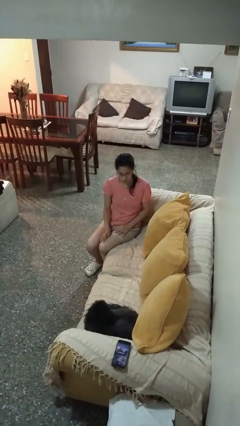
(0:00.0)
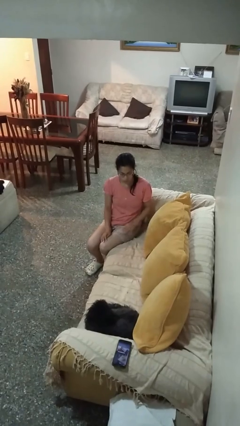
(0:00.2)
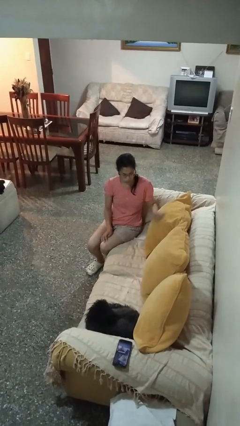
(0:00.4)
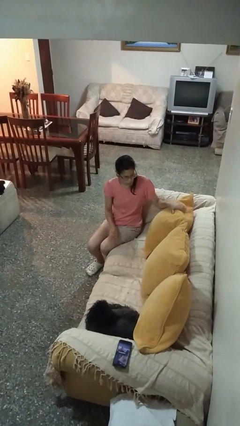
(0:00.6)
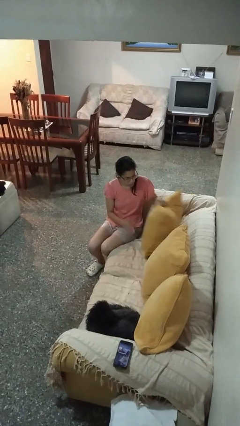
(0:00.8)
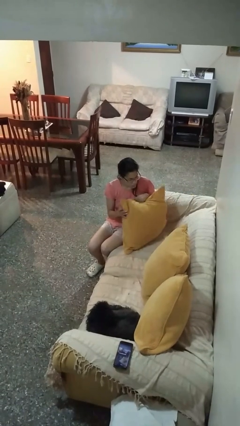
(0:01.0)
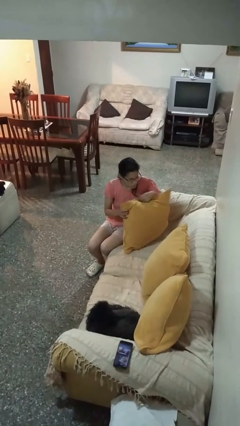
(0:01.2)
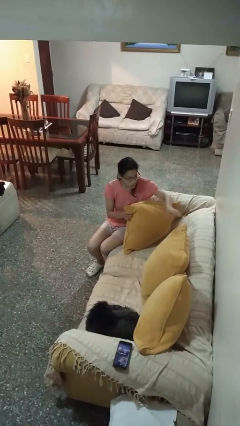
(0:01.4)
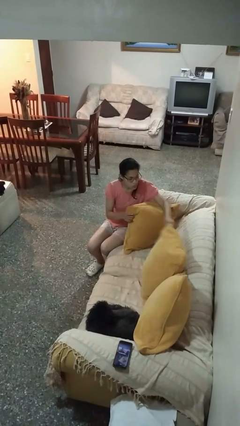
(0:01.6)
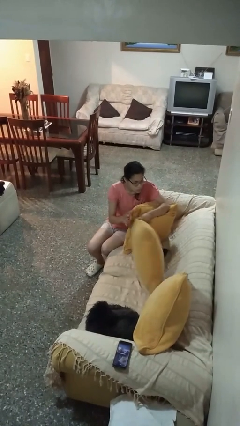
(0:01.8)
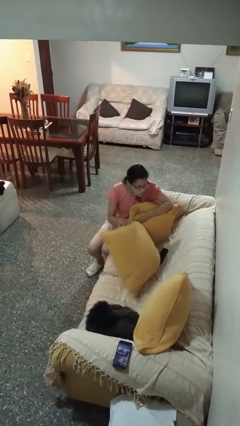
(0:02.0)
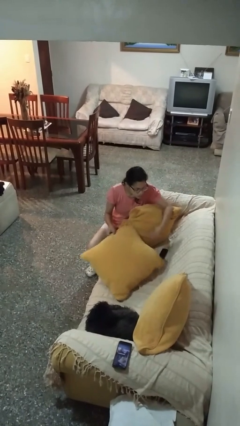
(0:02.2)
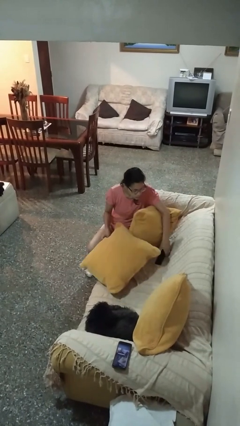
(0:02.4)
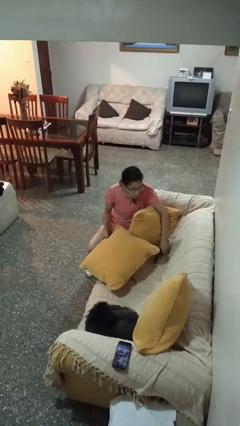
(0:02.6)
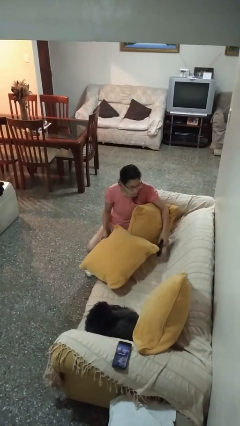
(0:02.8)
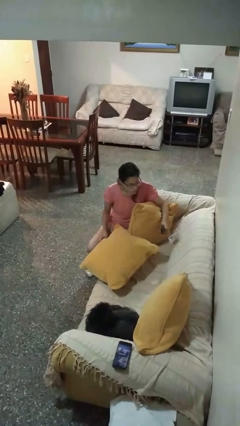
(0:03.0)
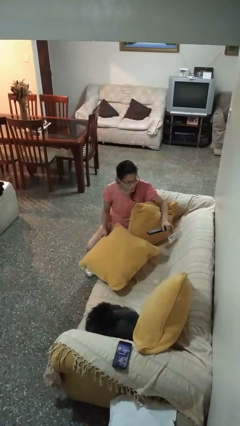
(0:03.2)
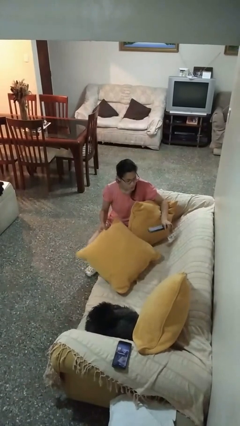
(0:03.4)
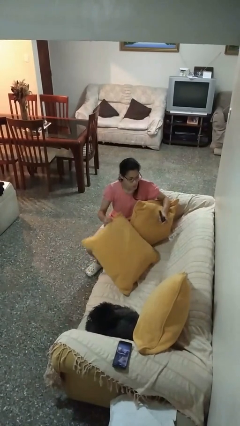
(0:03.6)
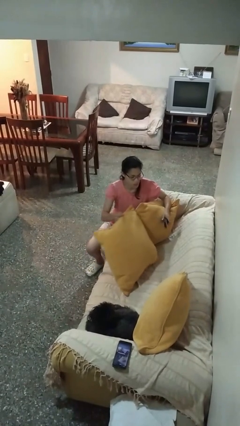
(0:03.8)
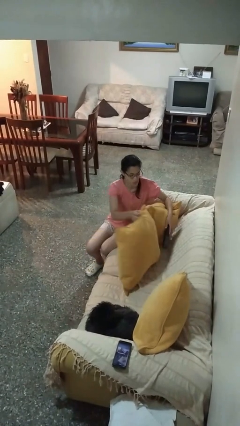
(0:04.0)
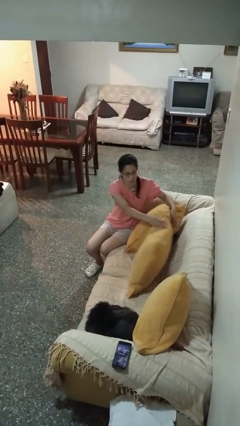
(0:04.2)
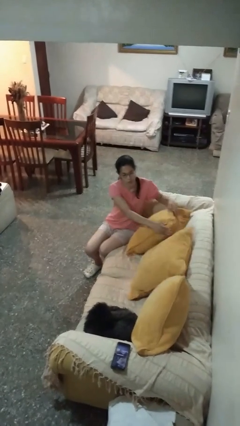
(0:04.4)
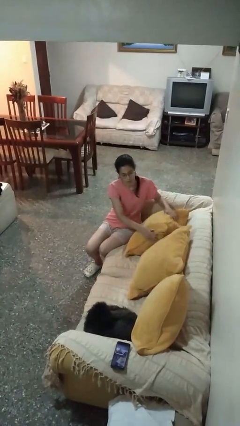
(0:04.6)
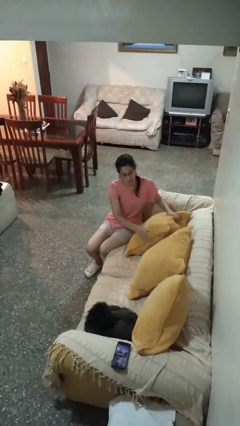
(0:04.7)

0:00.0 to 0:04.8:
person searches in couch

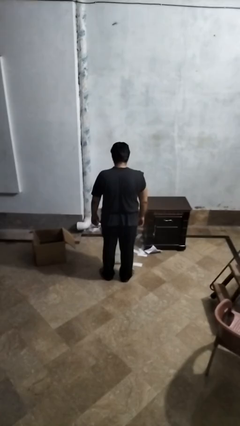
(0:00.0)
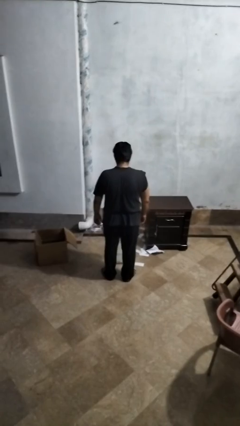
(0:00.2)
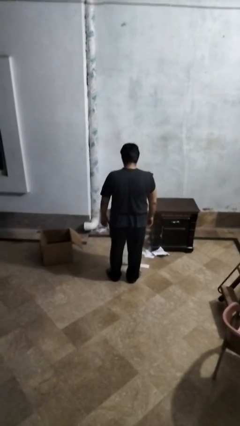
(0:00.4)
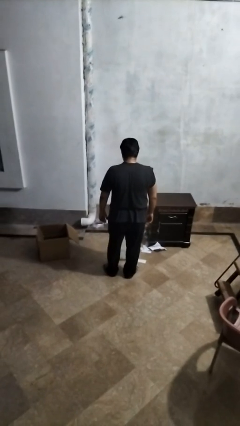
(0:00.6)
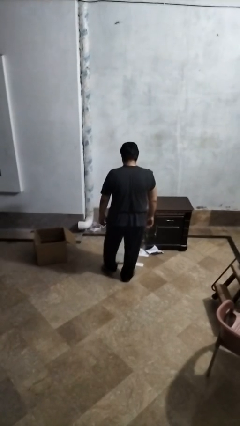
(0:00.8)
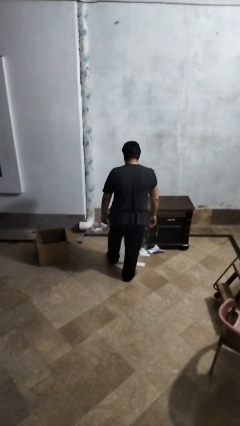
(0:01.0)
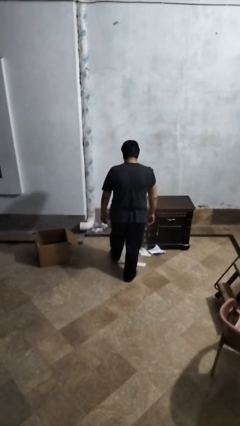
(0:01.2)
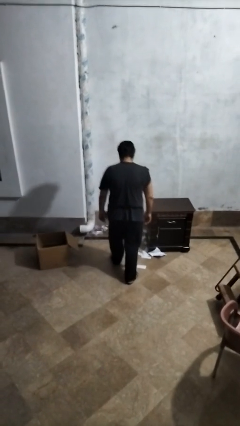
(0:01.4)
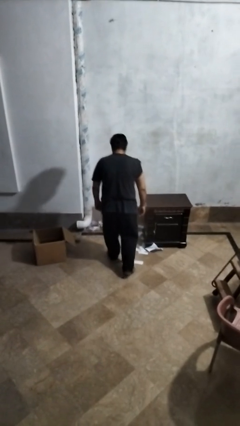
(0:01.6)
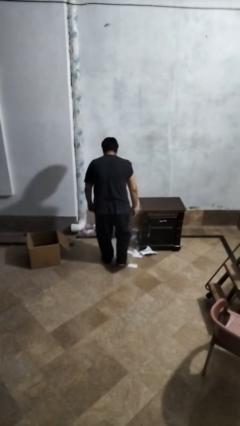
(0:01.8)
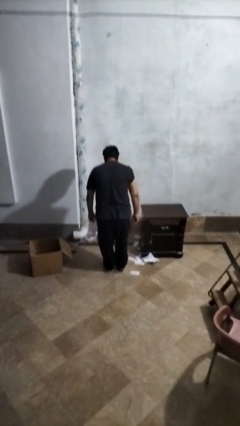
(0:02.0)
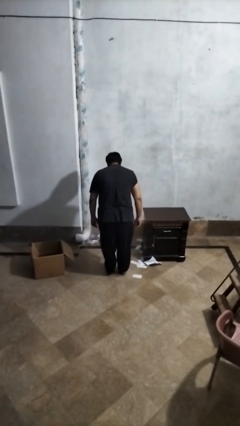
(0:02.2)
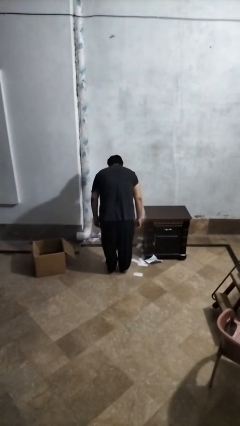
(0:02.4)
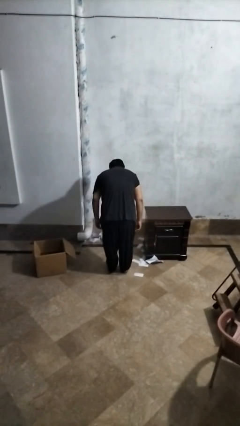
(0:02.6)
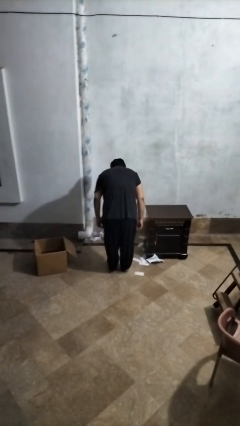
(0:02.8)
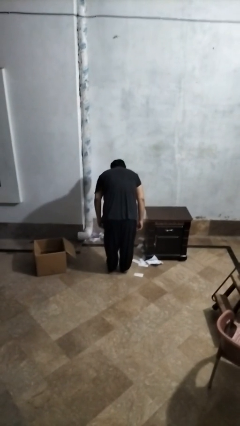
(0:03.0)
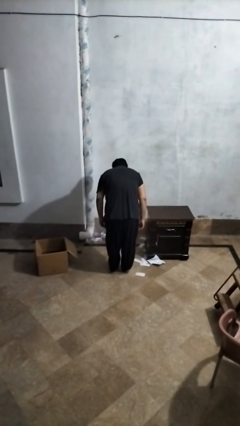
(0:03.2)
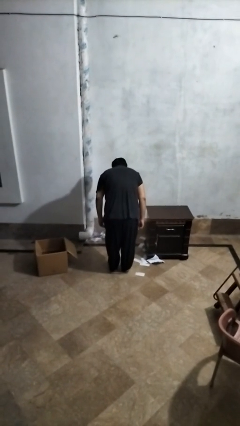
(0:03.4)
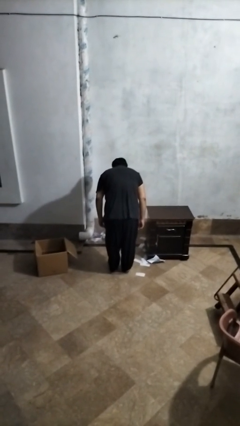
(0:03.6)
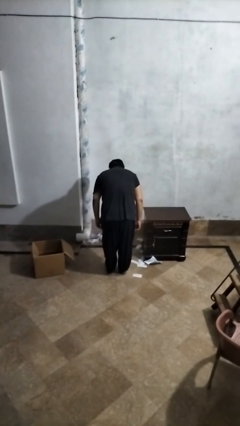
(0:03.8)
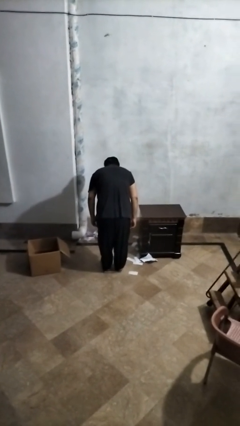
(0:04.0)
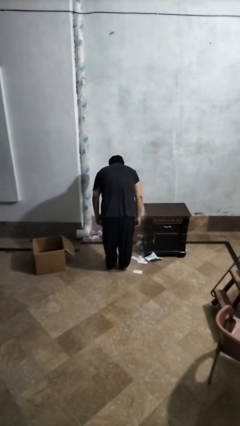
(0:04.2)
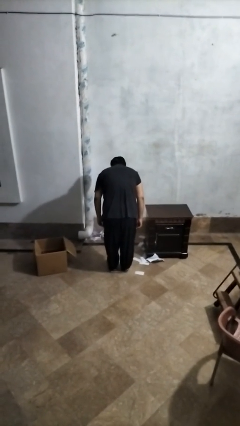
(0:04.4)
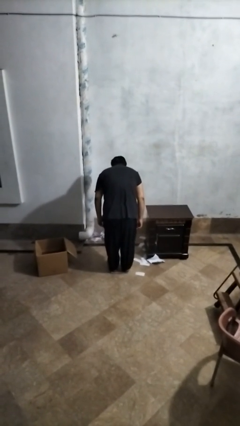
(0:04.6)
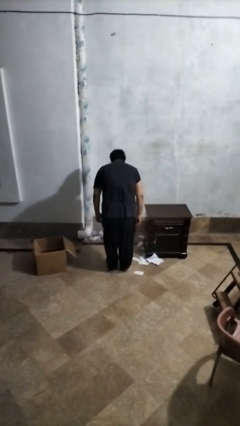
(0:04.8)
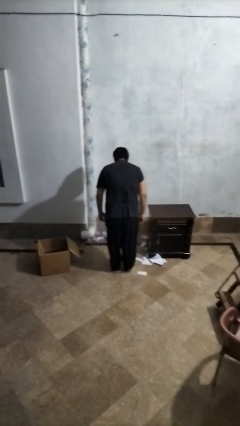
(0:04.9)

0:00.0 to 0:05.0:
person uses bodyweight scale

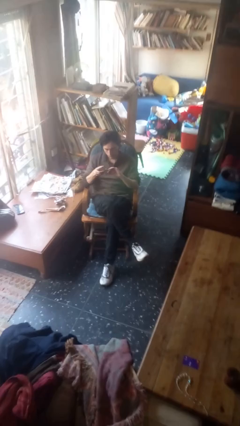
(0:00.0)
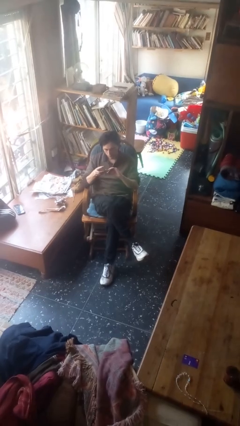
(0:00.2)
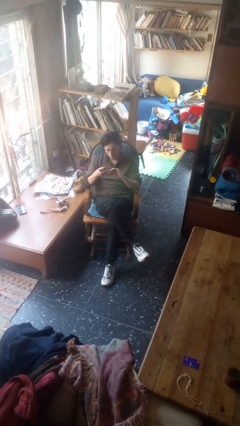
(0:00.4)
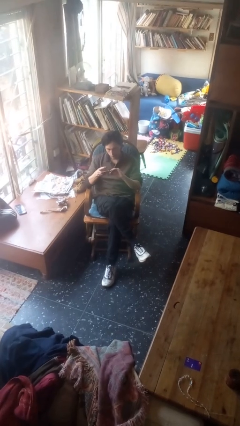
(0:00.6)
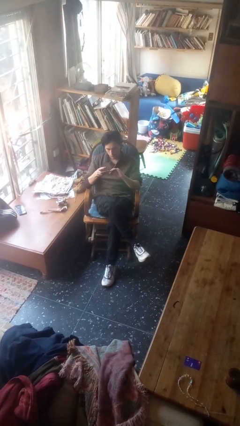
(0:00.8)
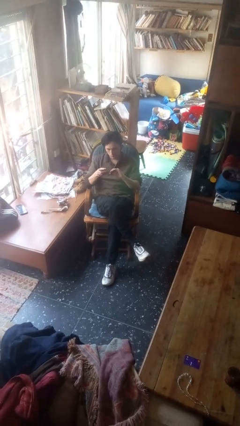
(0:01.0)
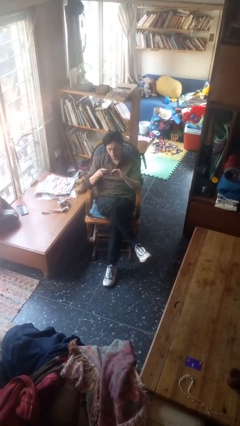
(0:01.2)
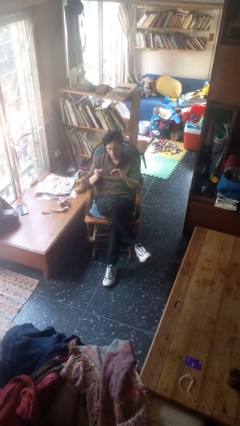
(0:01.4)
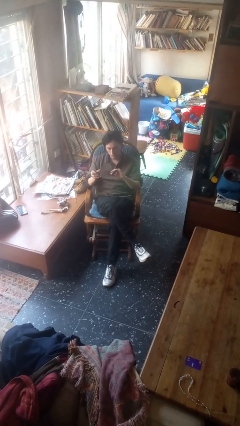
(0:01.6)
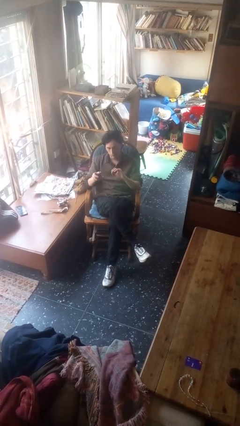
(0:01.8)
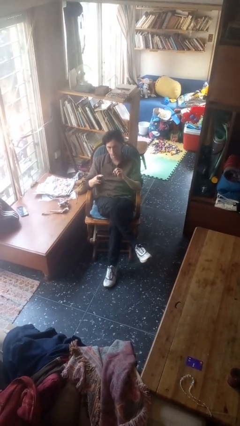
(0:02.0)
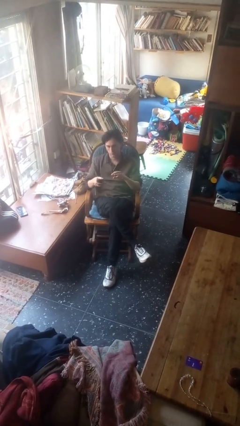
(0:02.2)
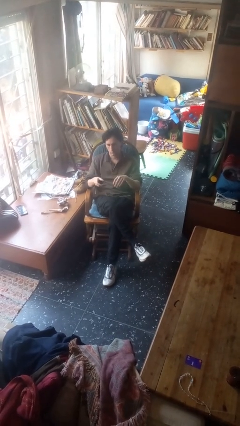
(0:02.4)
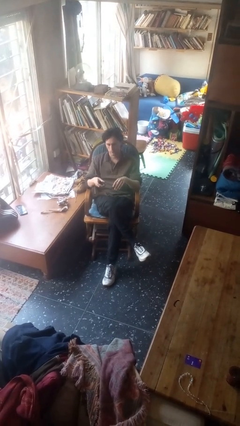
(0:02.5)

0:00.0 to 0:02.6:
person clips fingernails

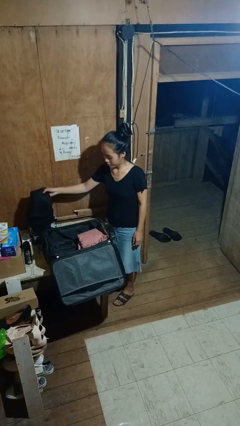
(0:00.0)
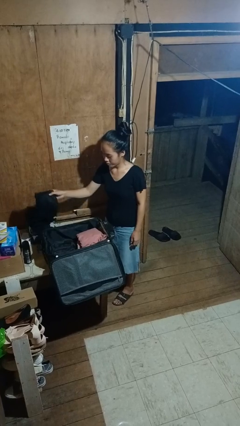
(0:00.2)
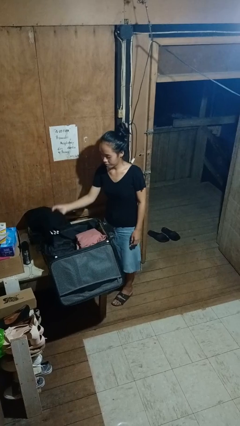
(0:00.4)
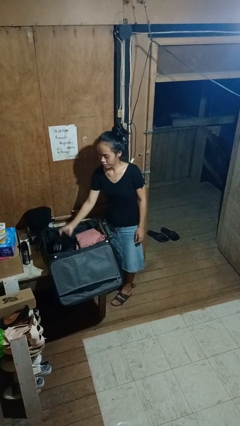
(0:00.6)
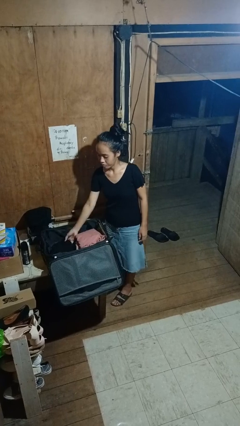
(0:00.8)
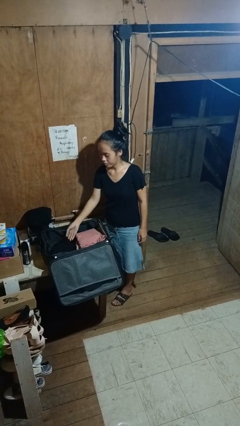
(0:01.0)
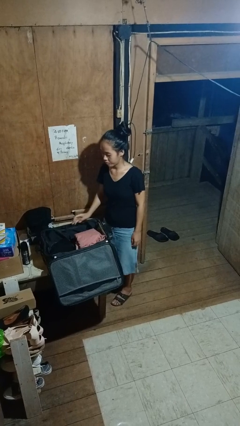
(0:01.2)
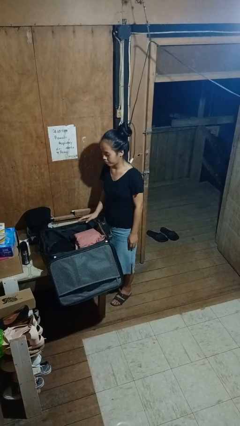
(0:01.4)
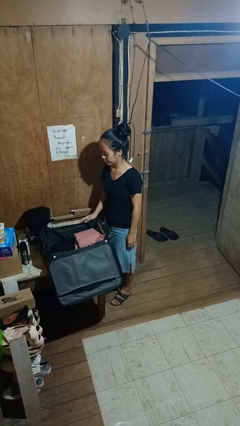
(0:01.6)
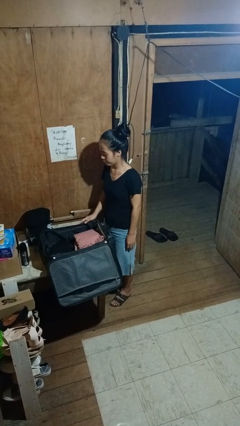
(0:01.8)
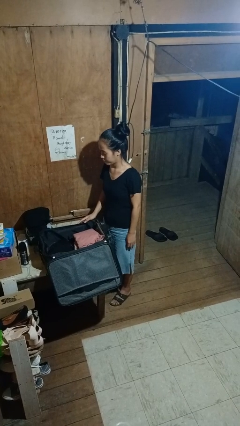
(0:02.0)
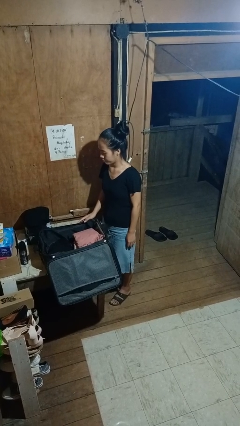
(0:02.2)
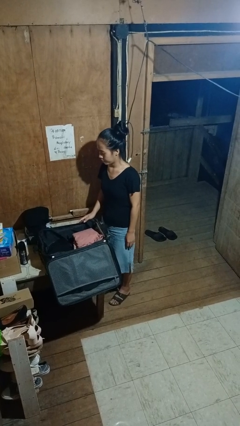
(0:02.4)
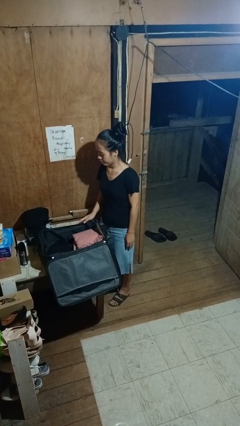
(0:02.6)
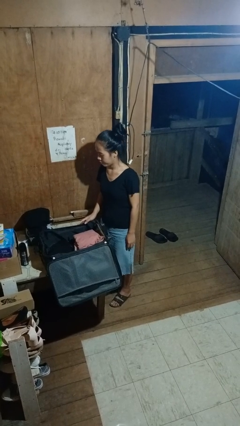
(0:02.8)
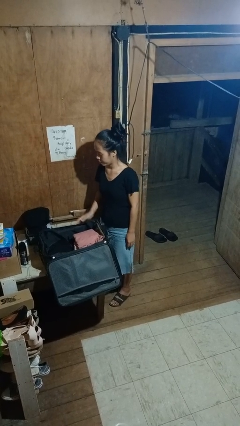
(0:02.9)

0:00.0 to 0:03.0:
person loads clothes into suitcase

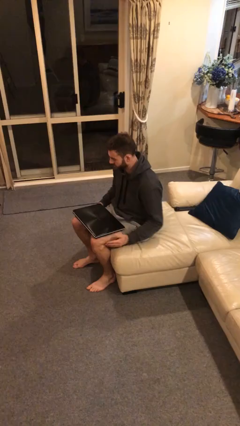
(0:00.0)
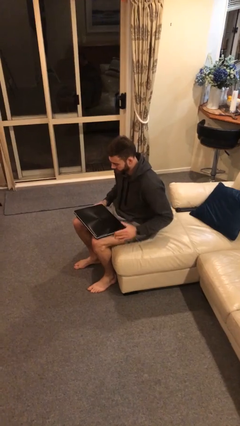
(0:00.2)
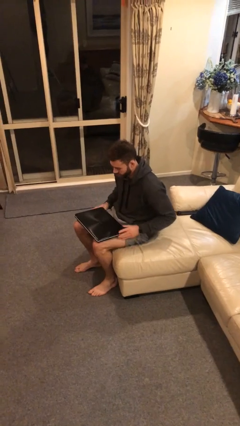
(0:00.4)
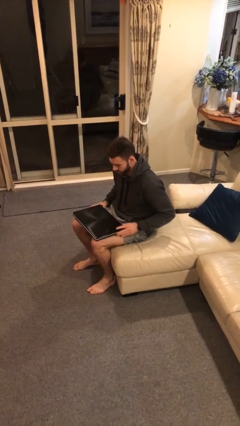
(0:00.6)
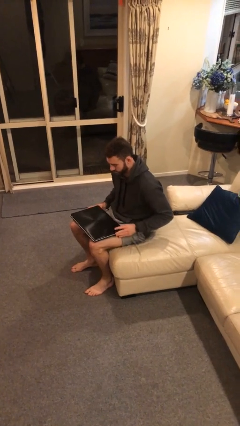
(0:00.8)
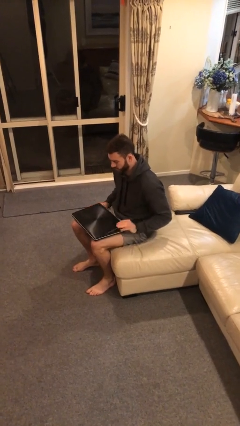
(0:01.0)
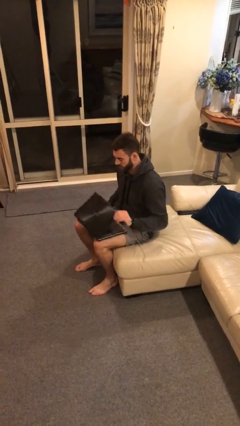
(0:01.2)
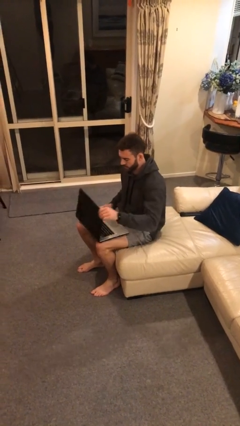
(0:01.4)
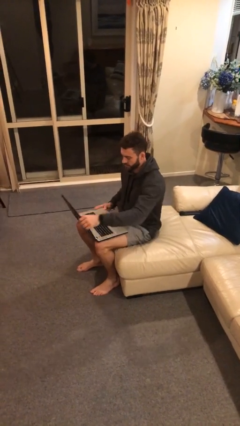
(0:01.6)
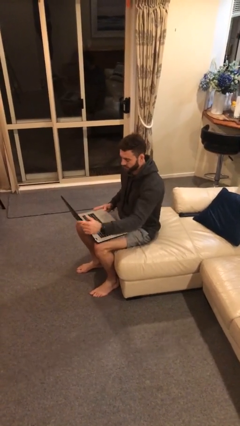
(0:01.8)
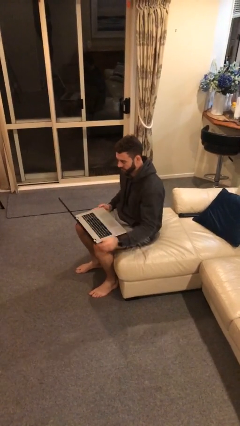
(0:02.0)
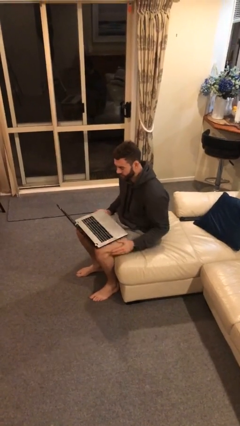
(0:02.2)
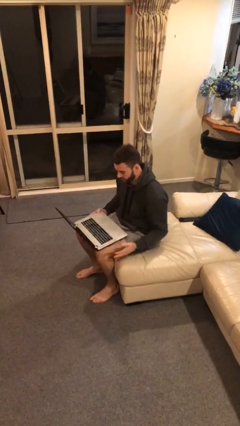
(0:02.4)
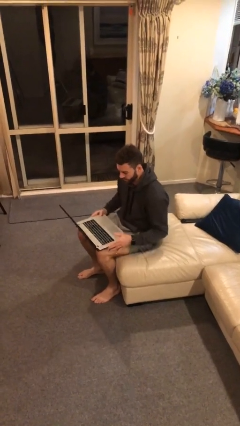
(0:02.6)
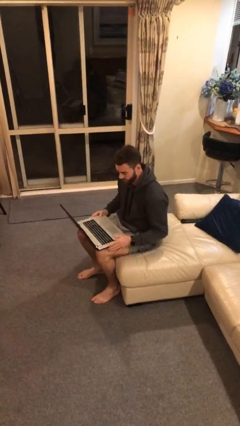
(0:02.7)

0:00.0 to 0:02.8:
person opens laptop
